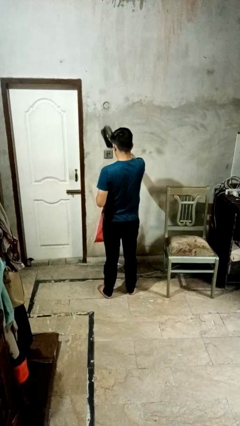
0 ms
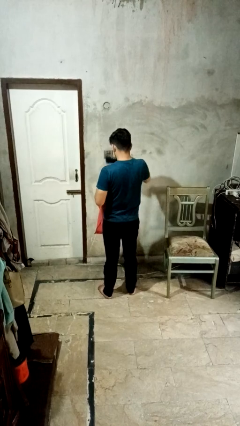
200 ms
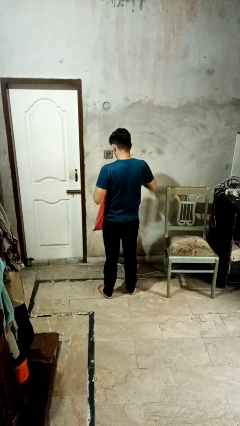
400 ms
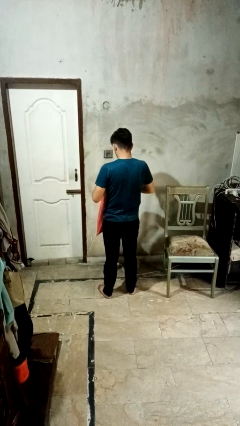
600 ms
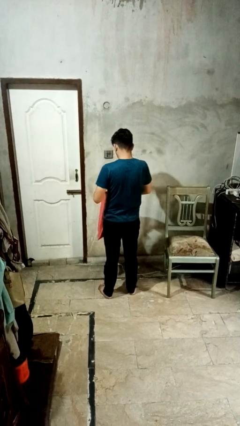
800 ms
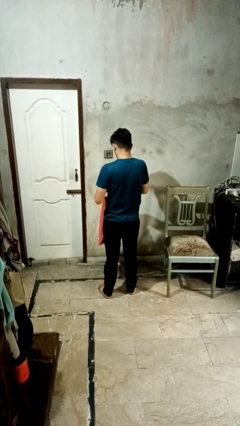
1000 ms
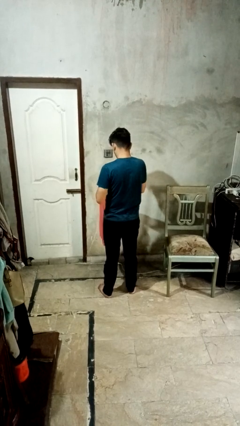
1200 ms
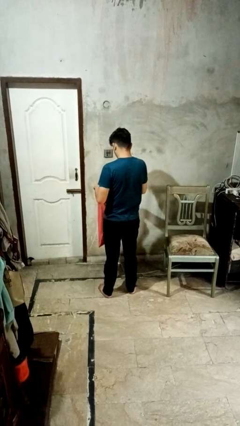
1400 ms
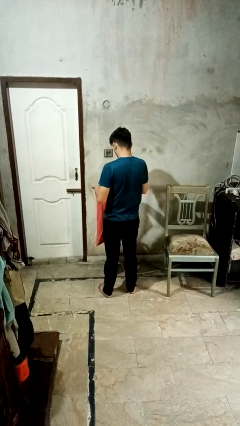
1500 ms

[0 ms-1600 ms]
person puts object into bag

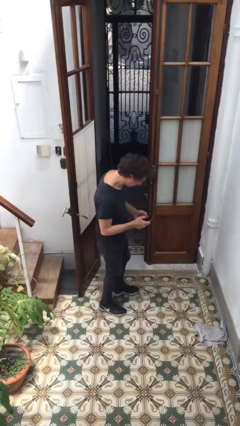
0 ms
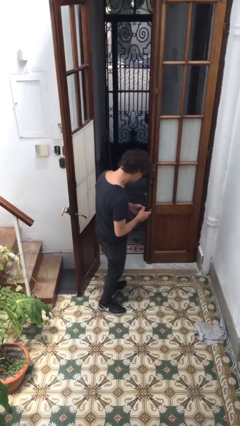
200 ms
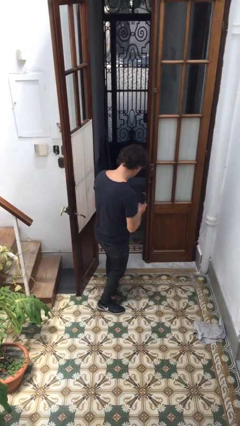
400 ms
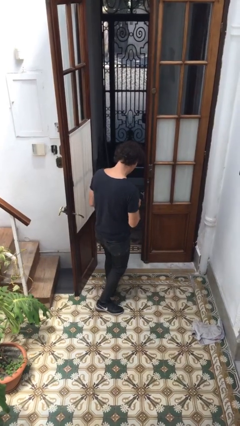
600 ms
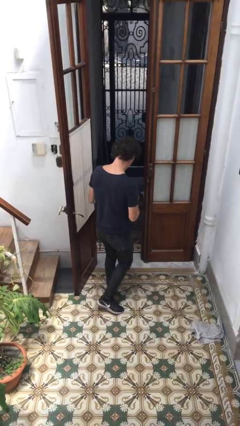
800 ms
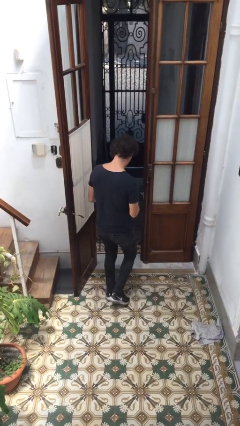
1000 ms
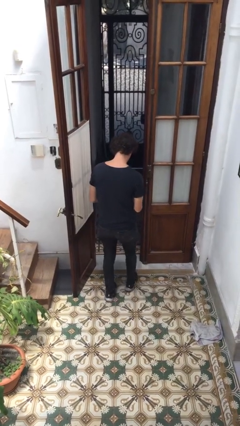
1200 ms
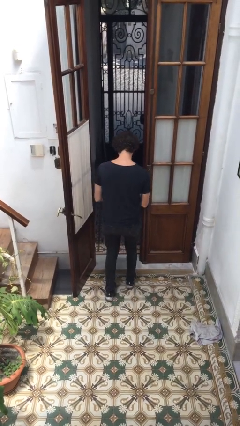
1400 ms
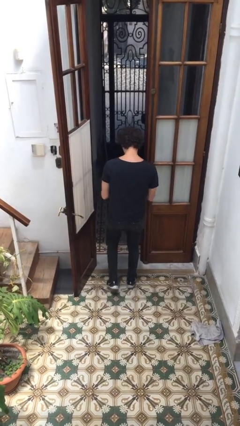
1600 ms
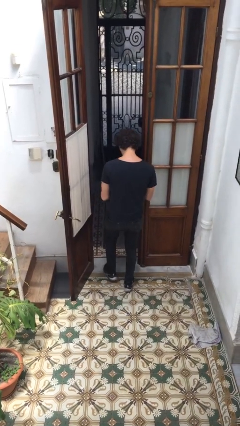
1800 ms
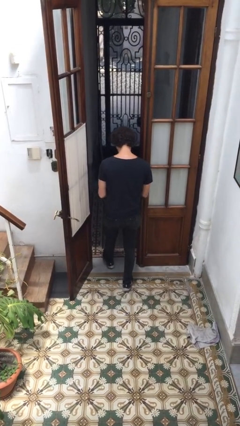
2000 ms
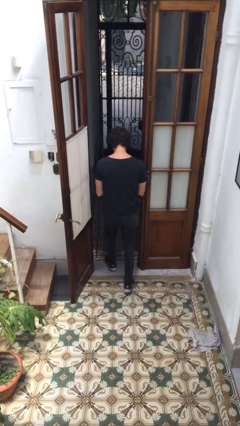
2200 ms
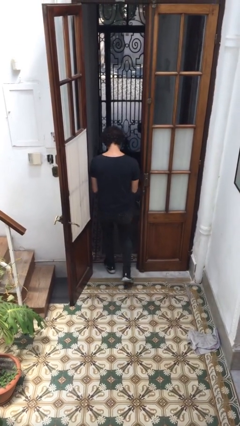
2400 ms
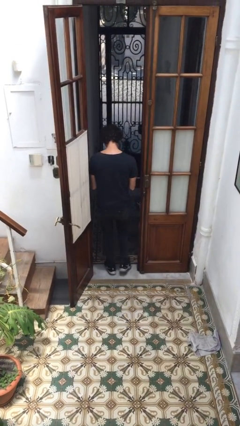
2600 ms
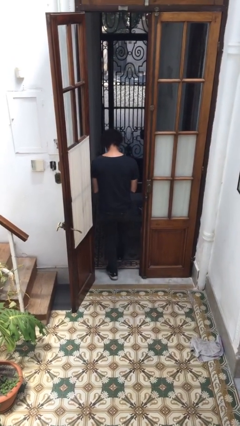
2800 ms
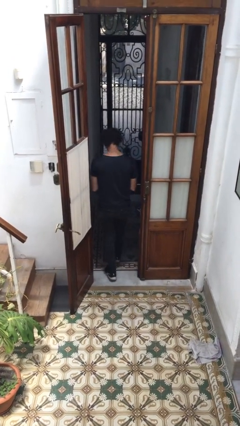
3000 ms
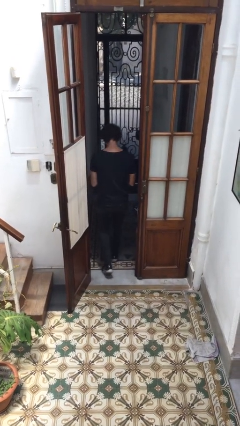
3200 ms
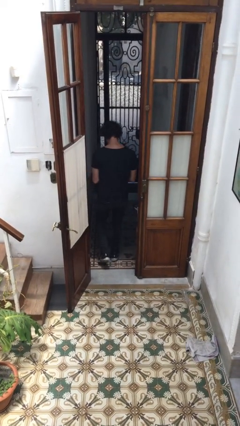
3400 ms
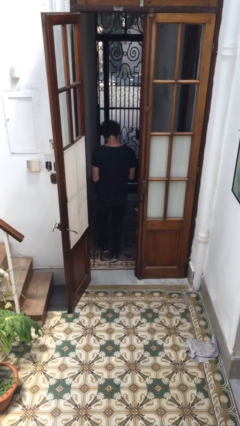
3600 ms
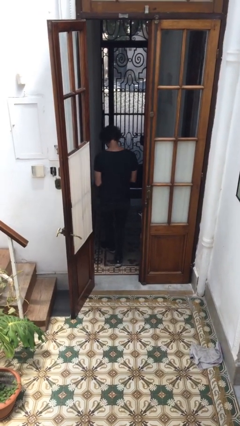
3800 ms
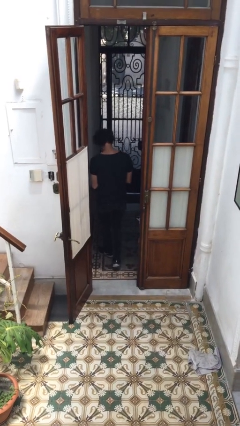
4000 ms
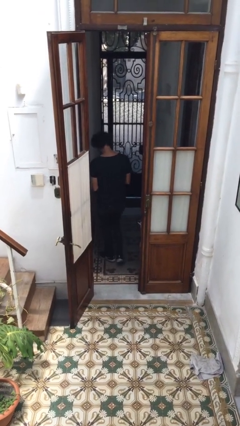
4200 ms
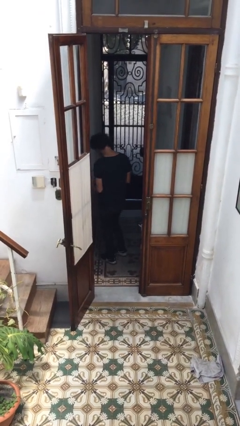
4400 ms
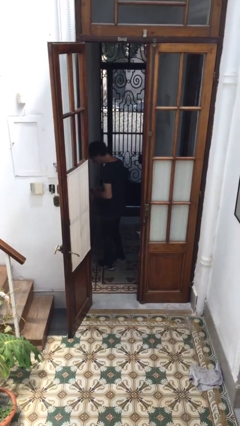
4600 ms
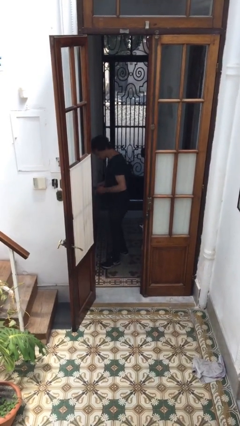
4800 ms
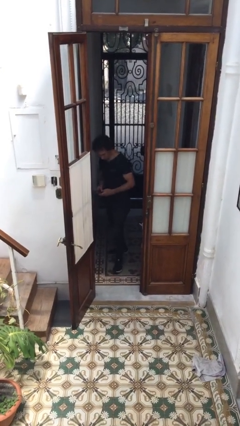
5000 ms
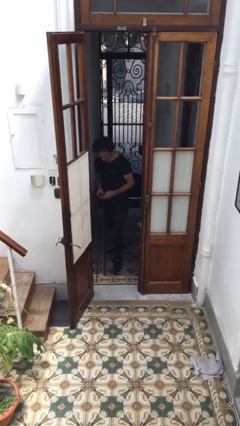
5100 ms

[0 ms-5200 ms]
person exits scene through structure

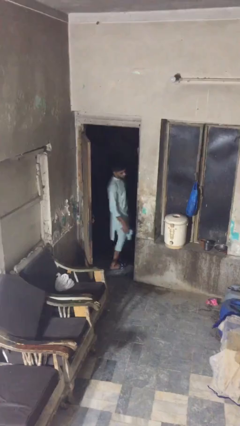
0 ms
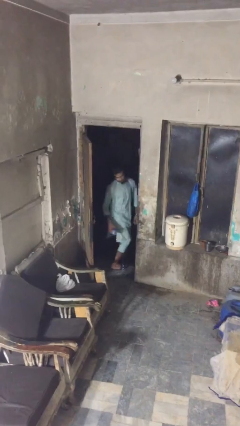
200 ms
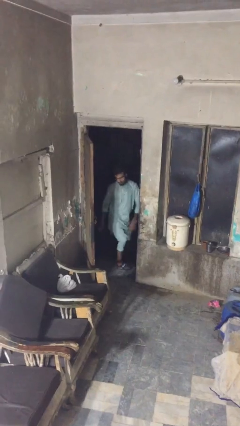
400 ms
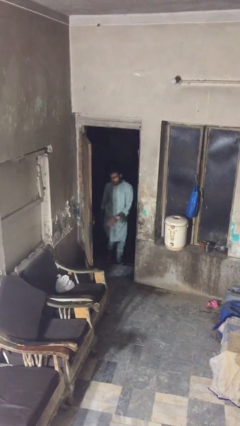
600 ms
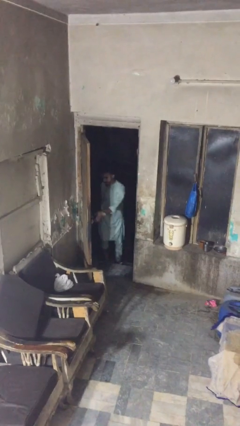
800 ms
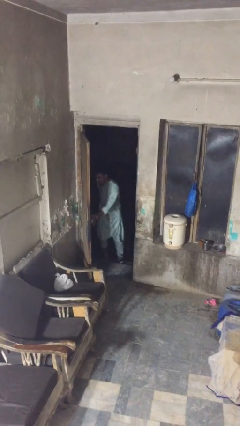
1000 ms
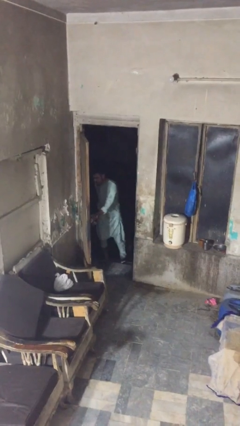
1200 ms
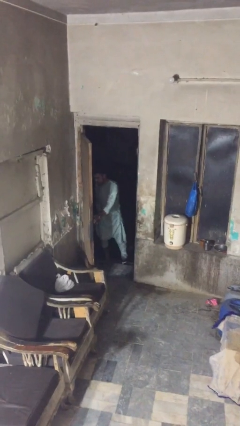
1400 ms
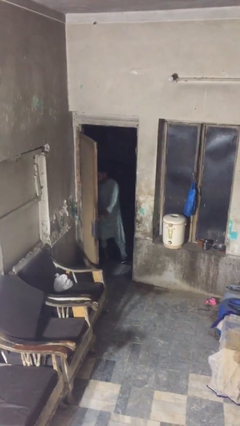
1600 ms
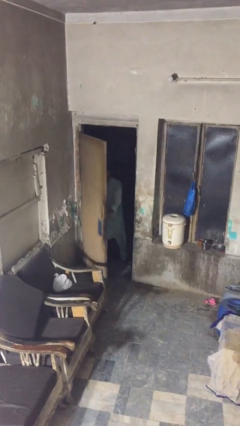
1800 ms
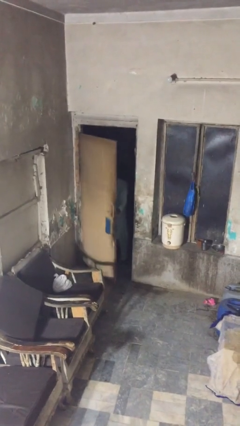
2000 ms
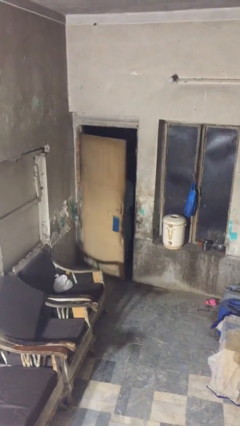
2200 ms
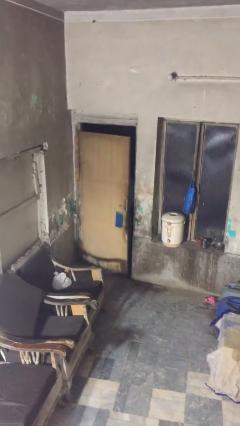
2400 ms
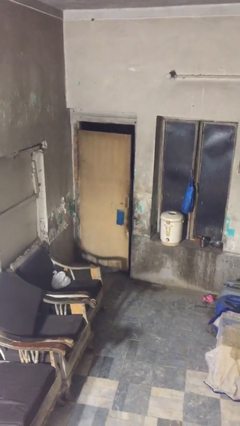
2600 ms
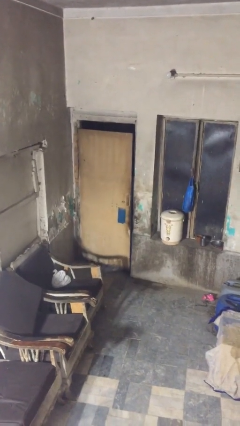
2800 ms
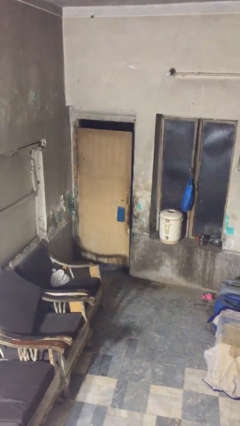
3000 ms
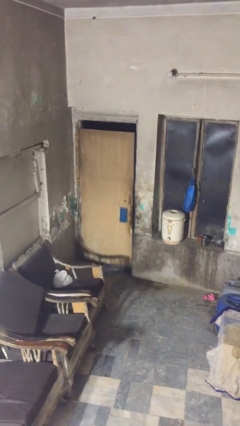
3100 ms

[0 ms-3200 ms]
person closes facility door

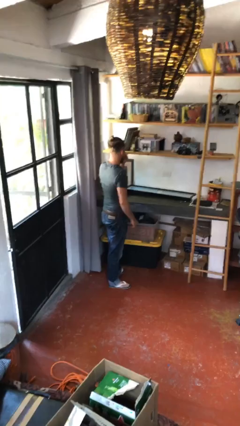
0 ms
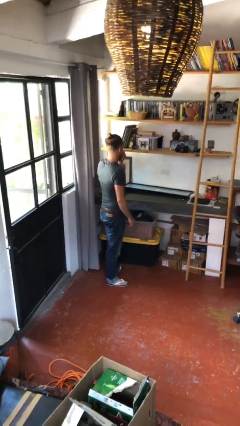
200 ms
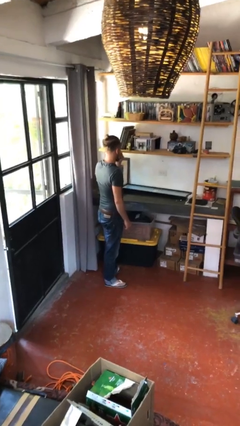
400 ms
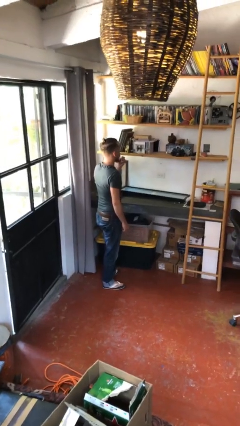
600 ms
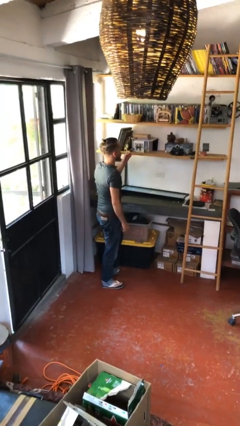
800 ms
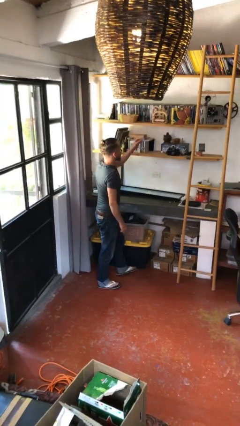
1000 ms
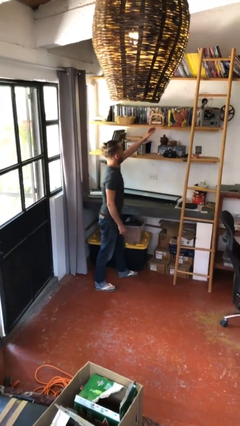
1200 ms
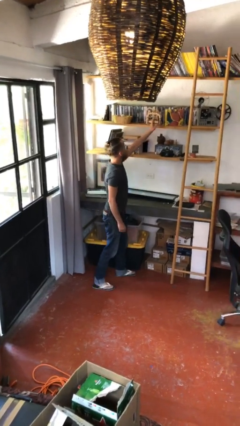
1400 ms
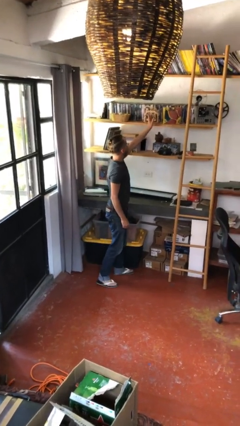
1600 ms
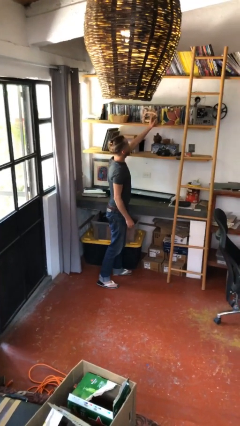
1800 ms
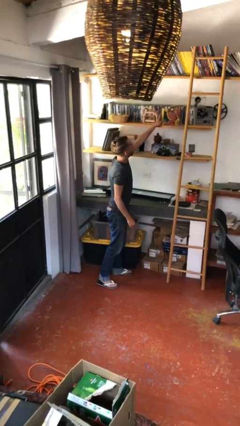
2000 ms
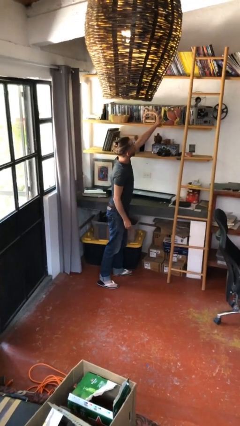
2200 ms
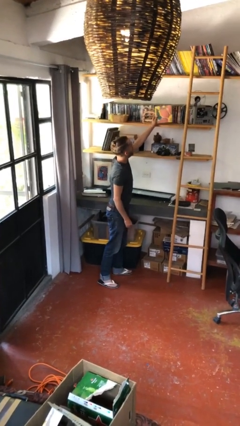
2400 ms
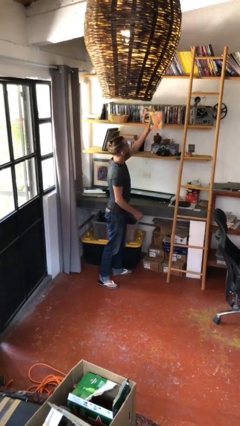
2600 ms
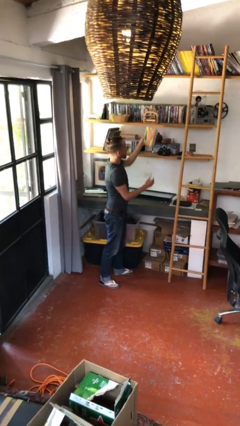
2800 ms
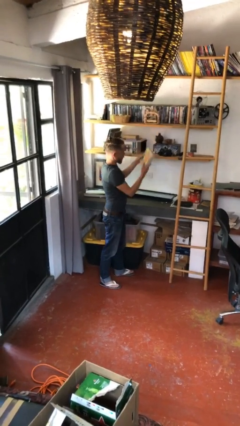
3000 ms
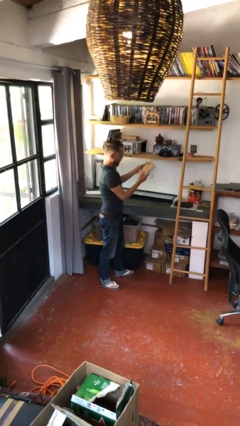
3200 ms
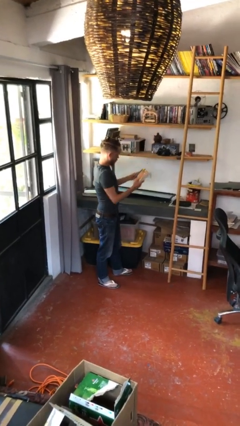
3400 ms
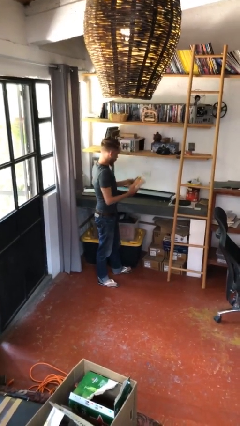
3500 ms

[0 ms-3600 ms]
person picks up object from shelf

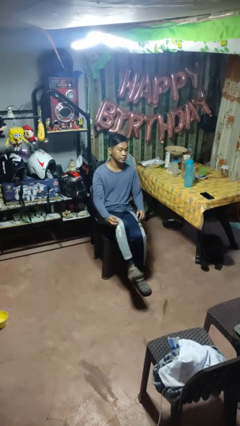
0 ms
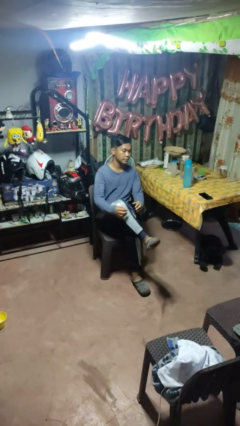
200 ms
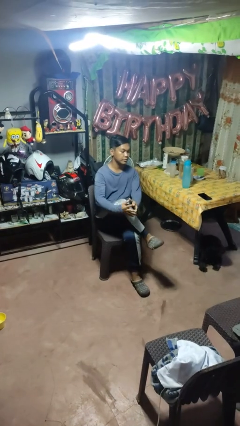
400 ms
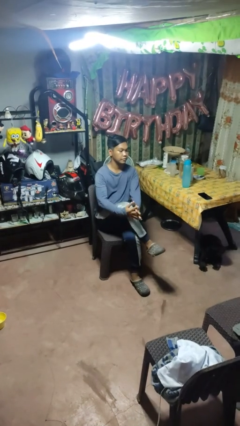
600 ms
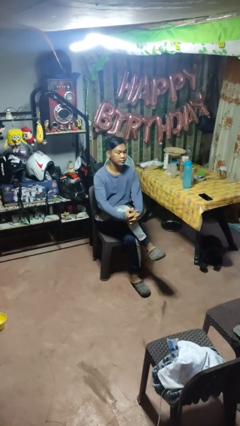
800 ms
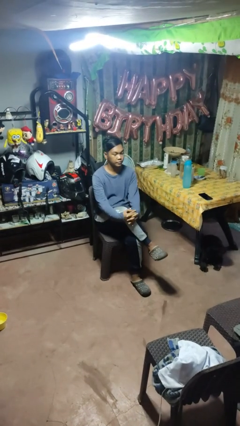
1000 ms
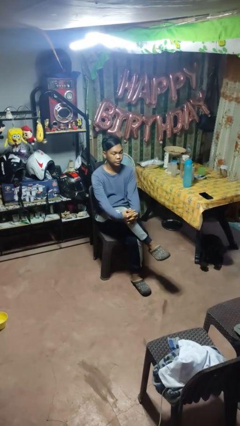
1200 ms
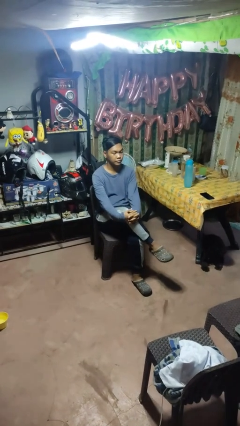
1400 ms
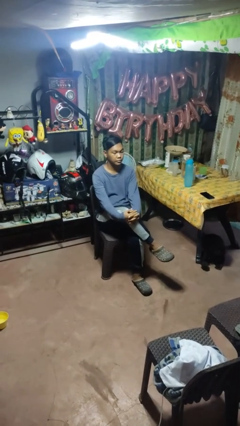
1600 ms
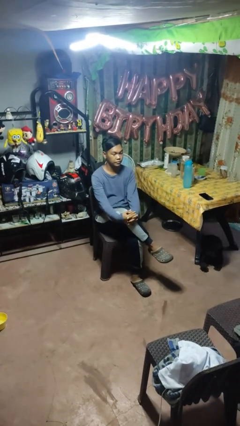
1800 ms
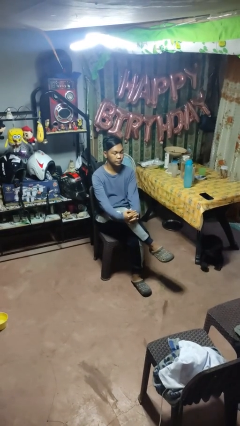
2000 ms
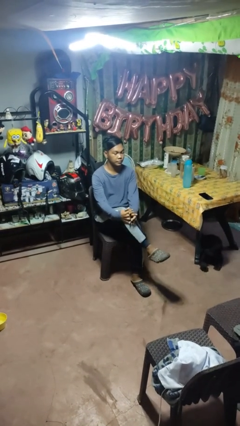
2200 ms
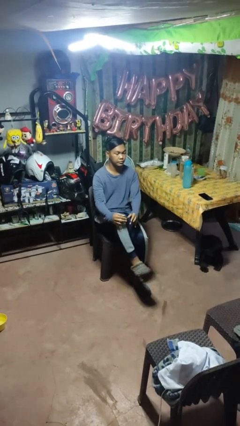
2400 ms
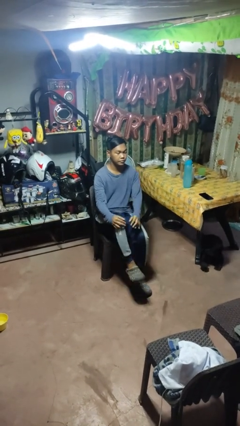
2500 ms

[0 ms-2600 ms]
person crosses legs

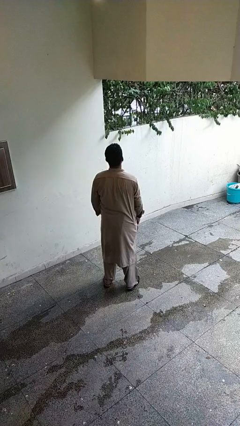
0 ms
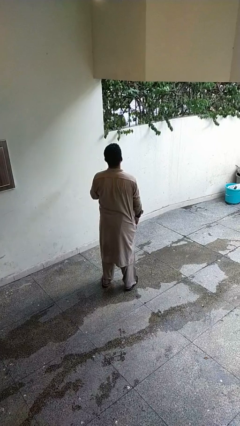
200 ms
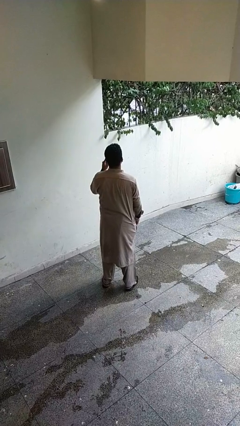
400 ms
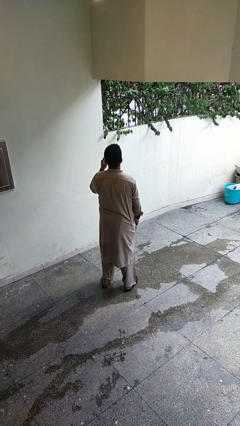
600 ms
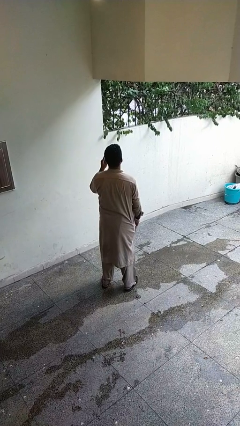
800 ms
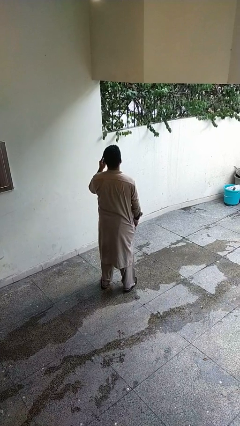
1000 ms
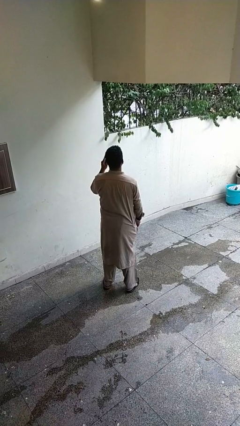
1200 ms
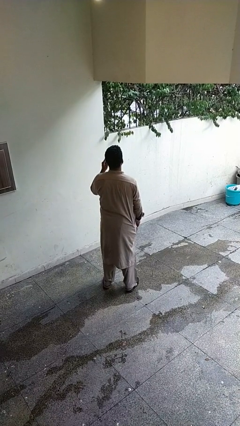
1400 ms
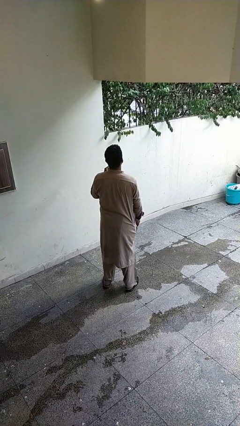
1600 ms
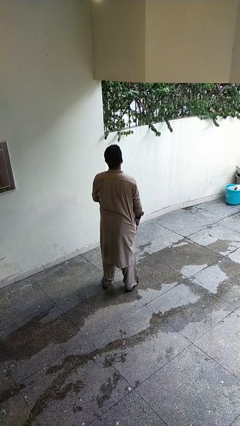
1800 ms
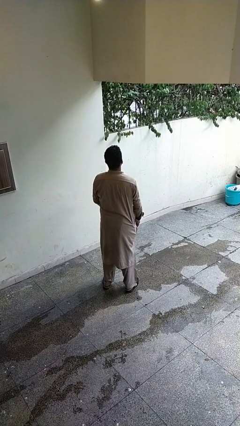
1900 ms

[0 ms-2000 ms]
person gestures number one
